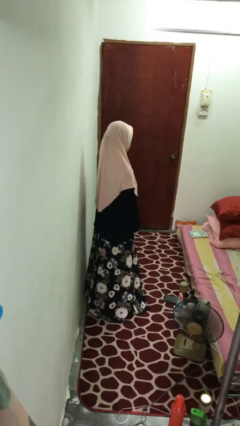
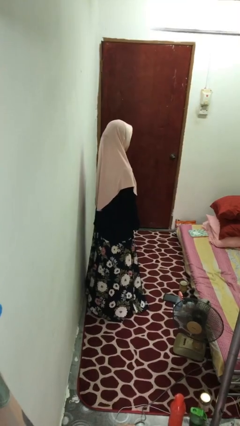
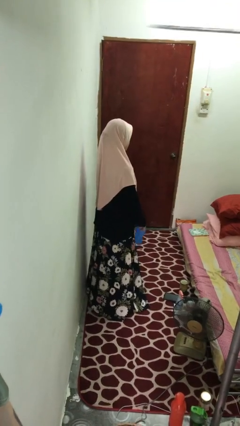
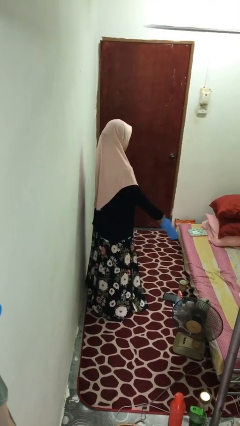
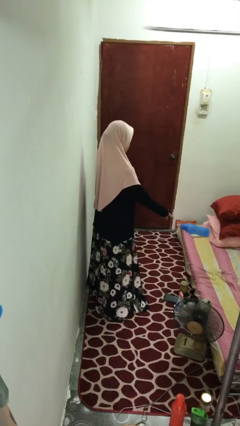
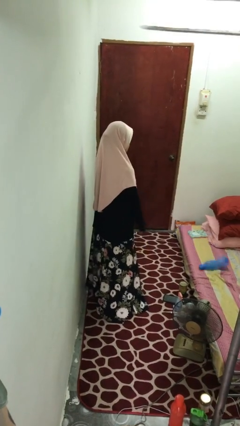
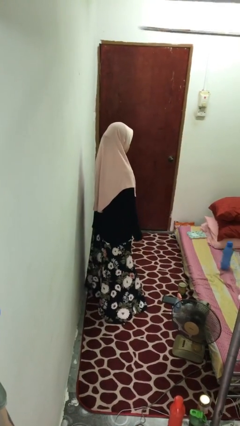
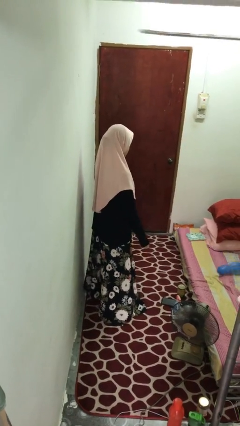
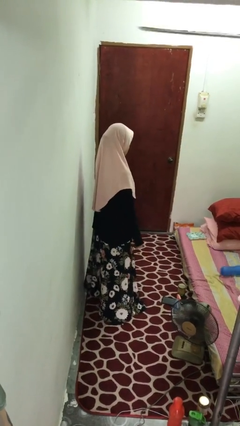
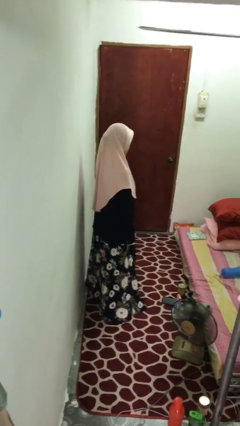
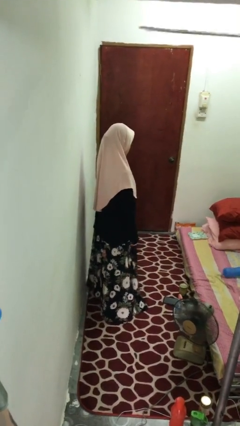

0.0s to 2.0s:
person throws object on bed

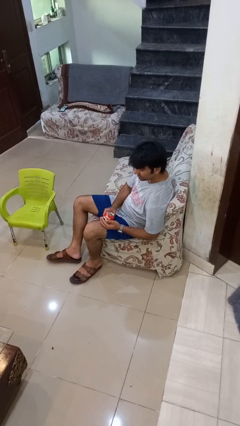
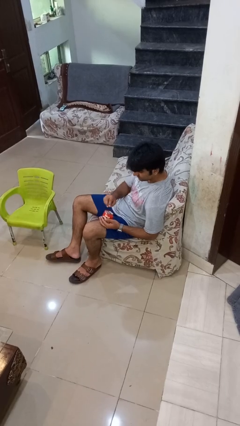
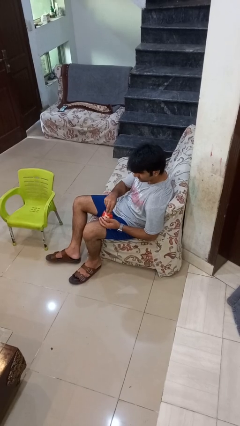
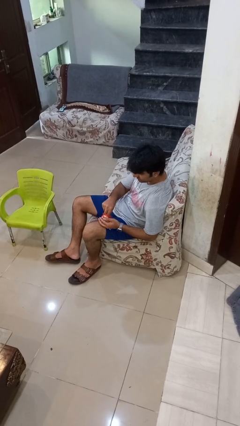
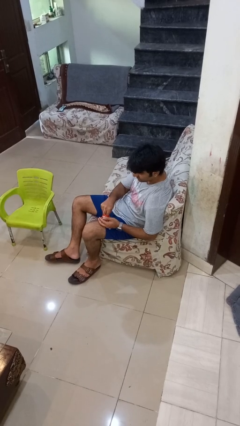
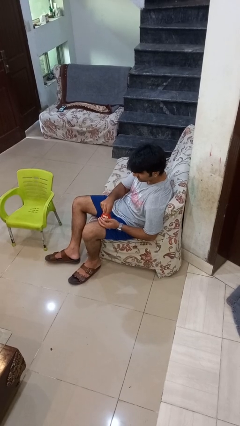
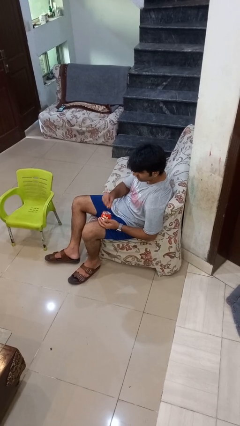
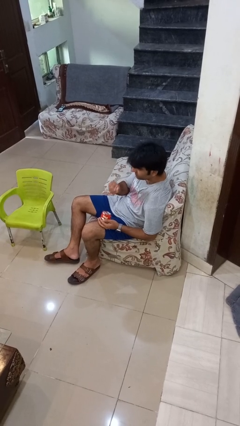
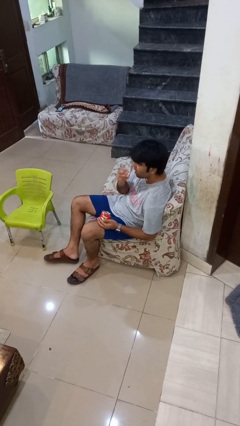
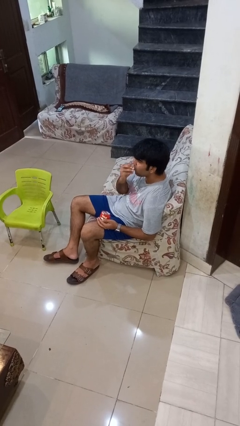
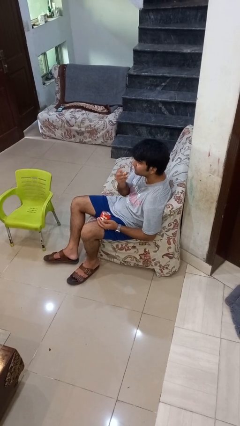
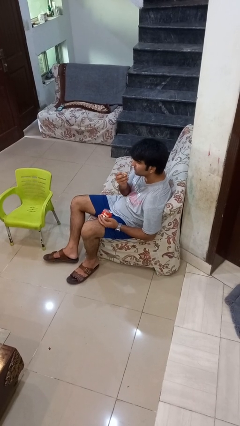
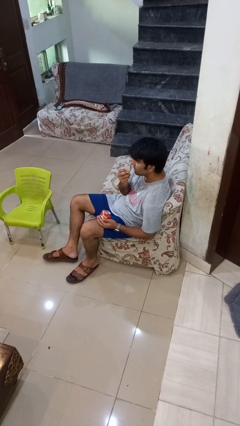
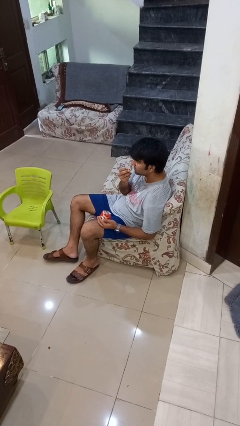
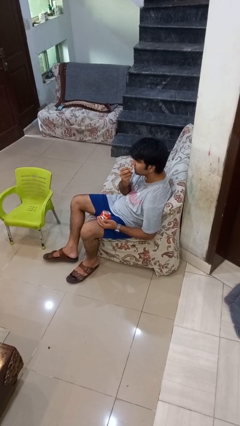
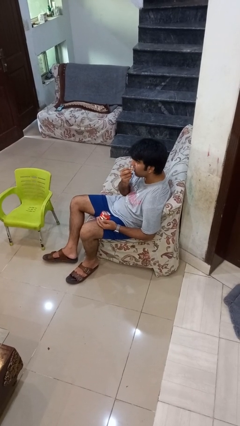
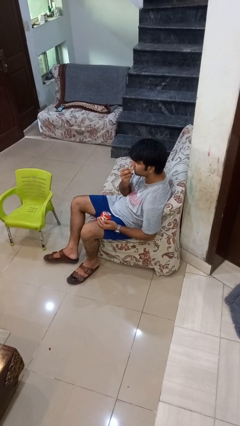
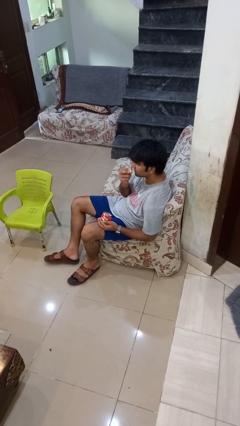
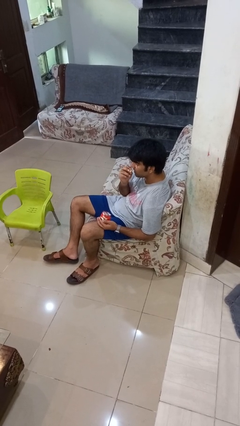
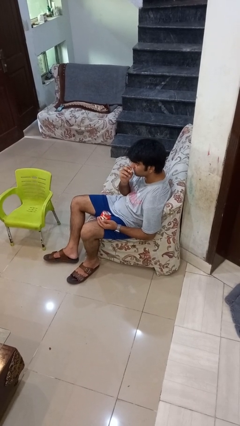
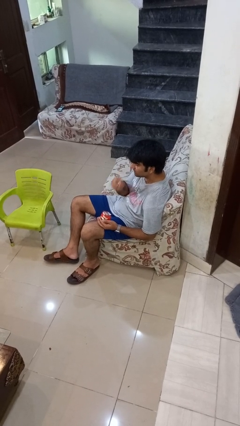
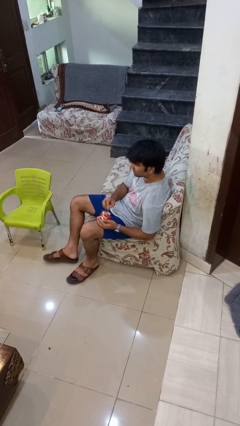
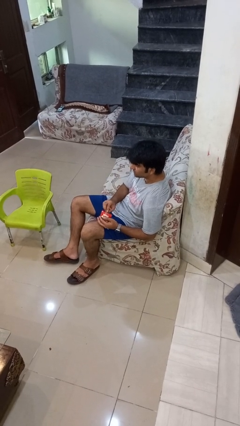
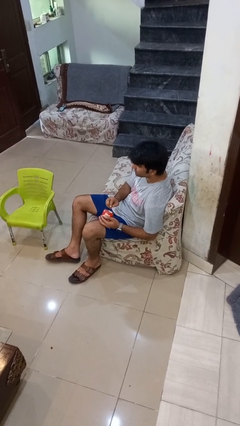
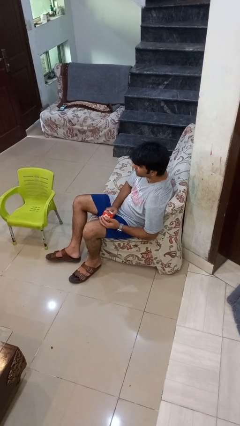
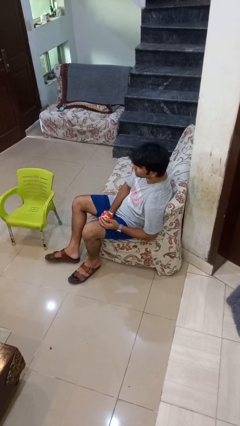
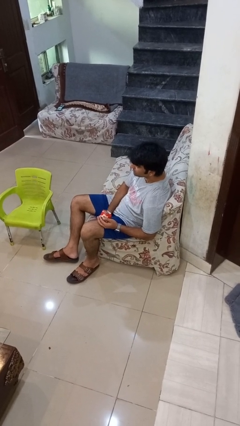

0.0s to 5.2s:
person eats snack from bag

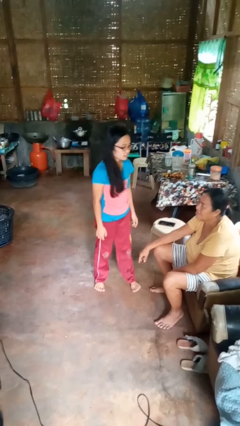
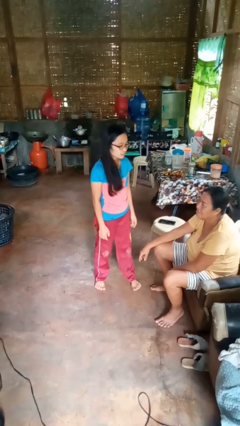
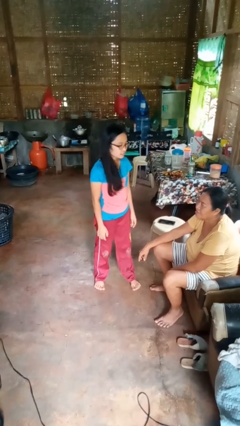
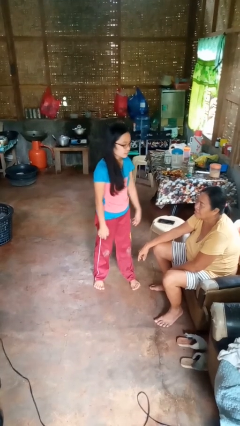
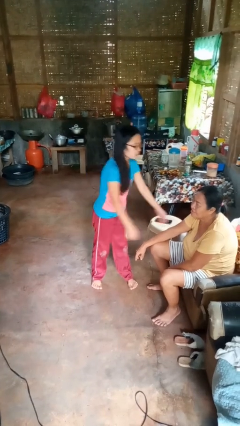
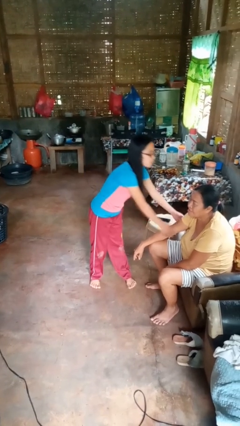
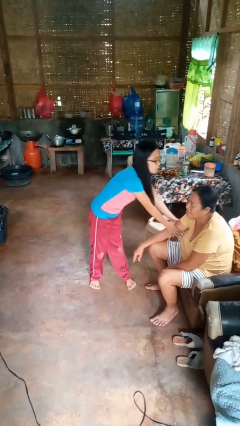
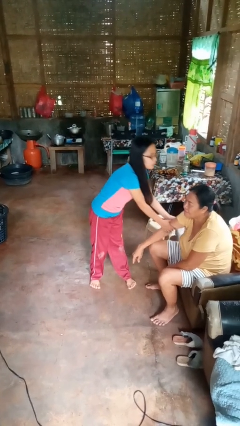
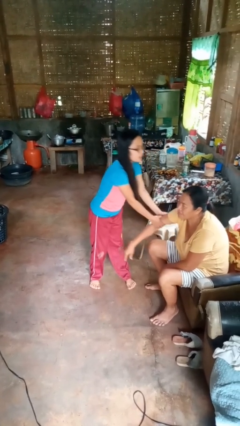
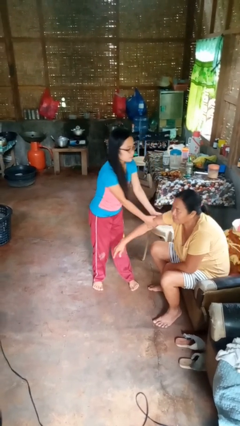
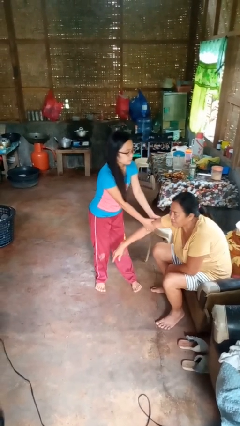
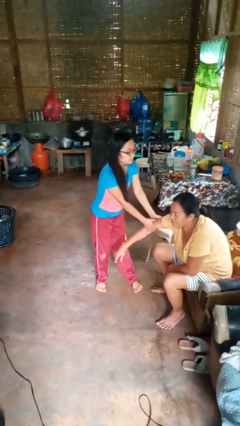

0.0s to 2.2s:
person grabs person by bicep

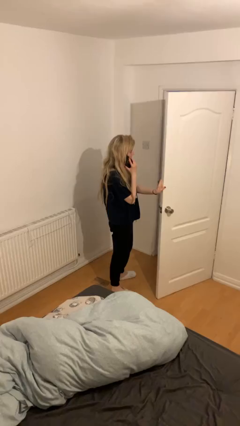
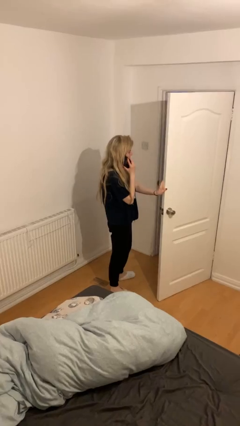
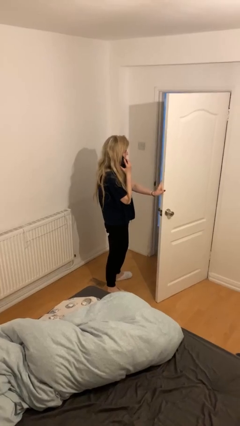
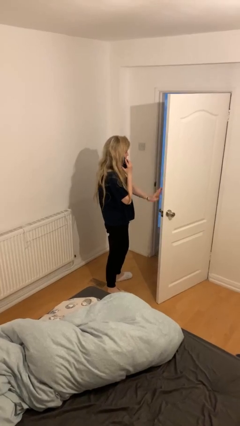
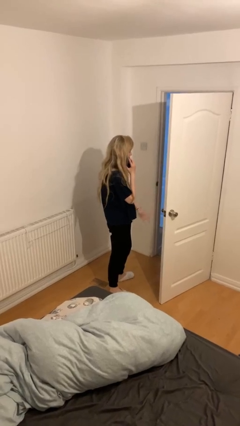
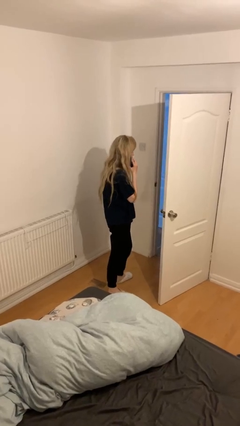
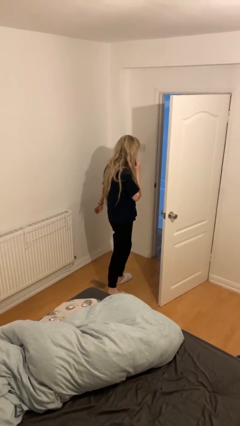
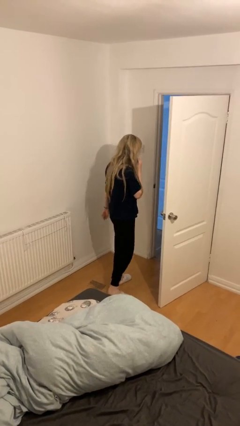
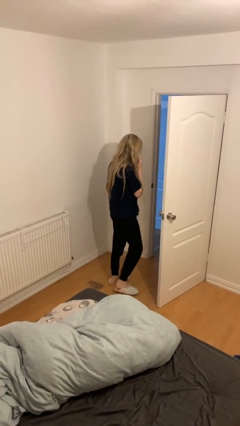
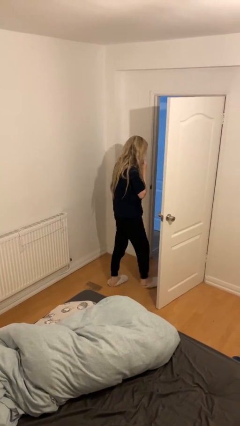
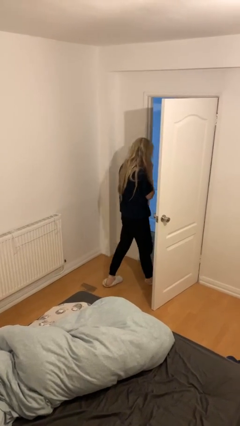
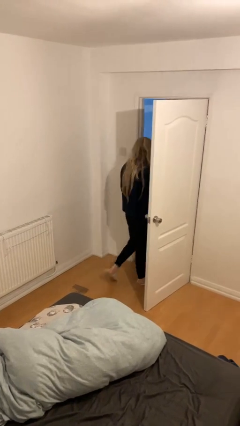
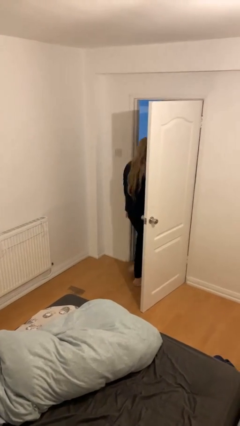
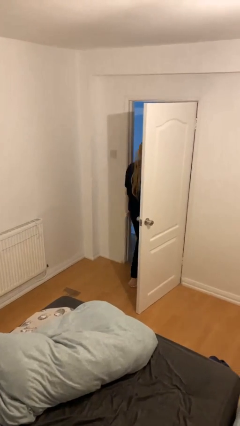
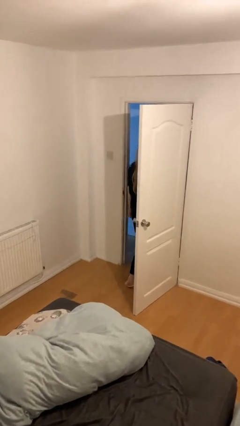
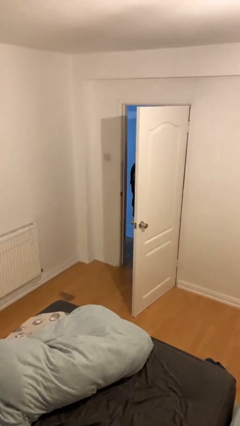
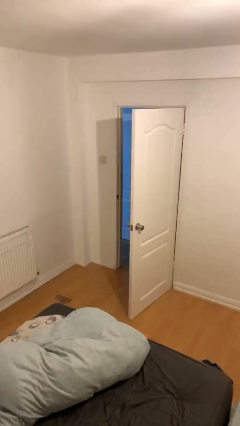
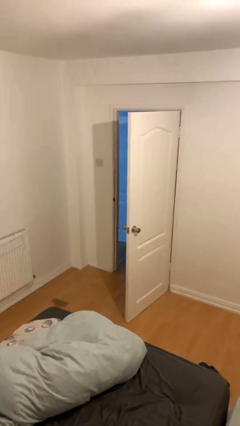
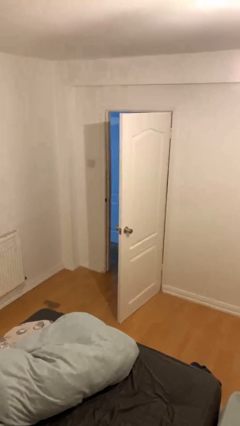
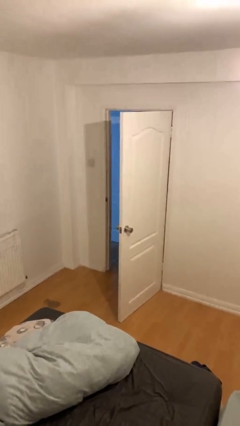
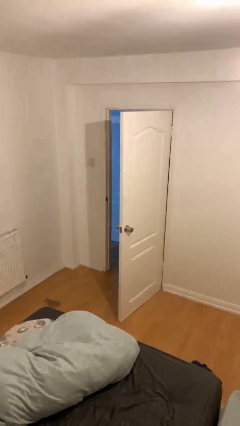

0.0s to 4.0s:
person exits scene through structure

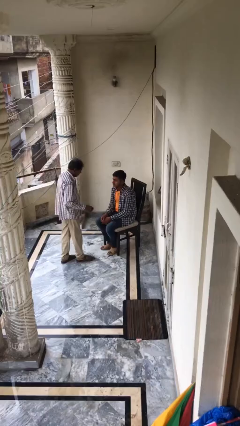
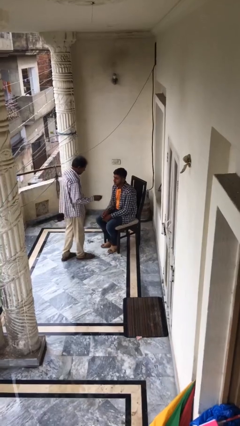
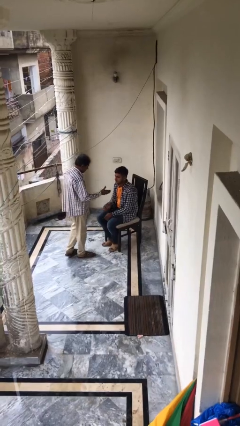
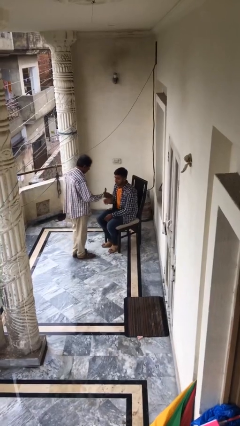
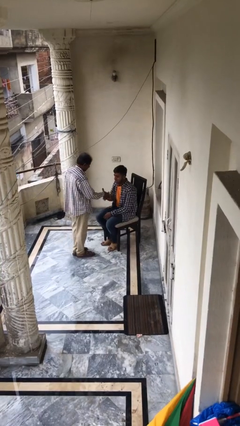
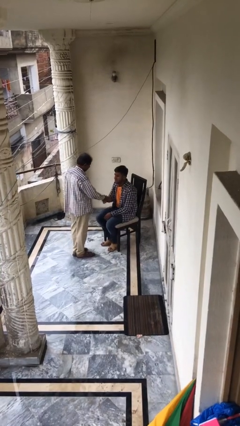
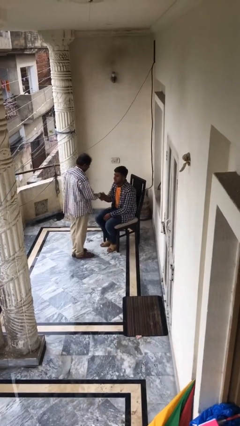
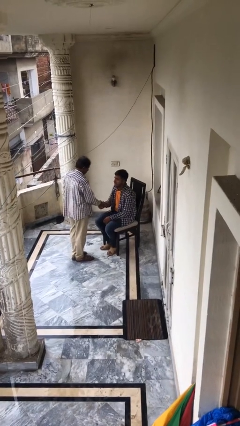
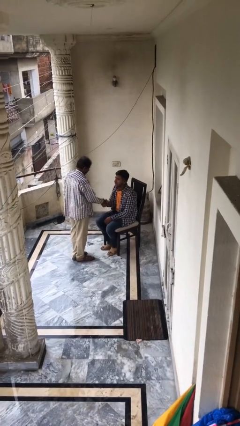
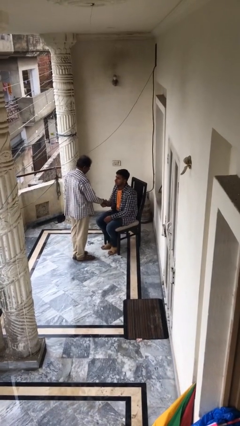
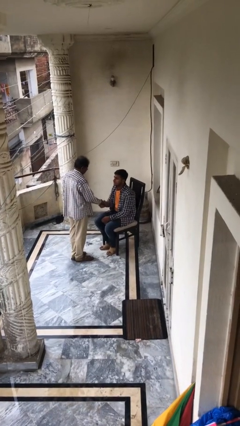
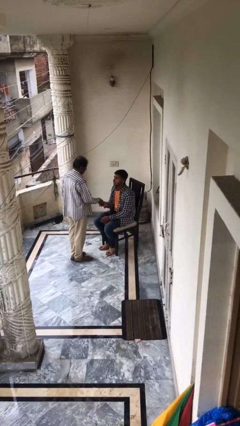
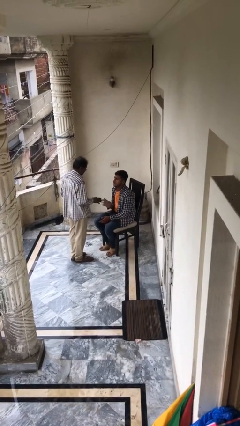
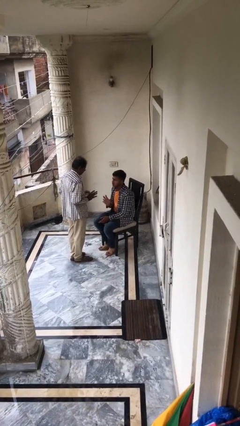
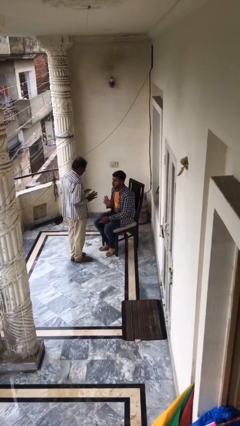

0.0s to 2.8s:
person shakes hand

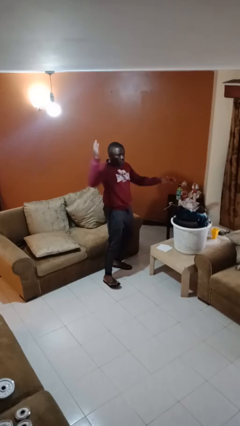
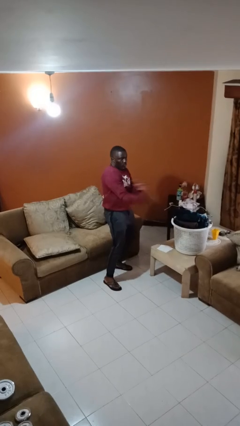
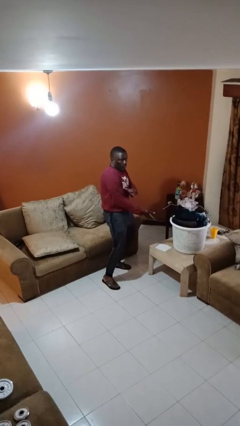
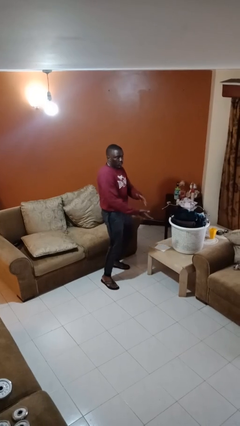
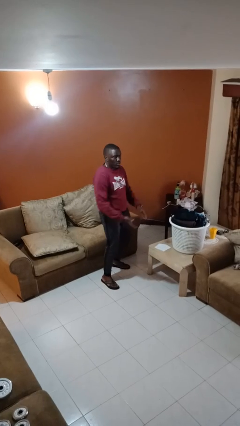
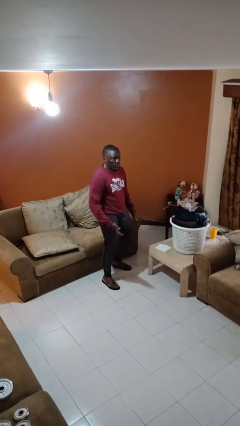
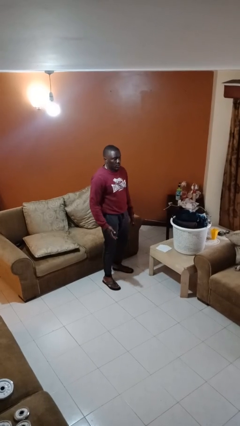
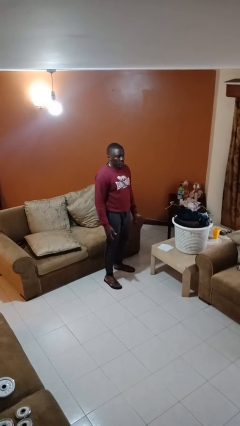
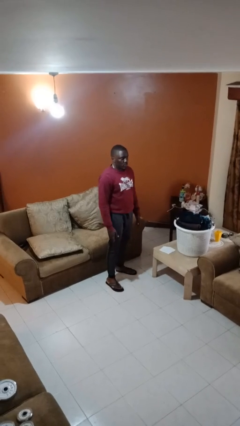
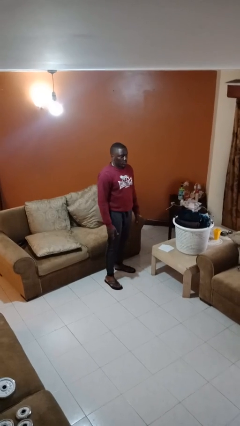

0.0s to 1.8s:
person karate chop
